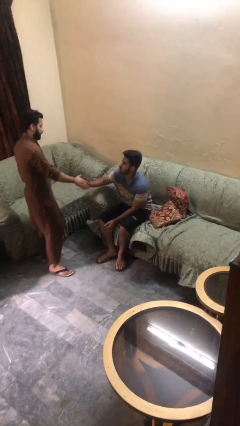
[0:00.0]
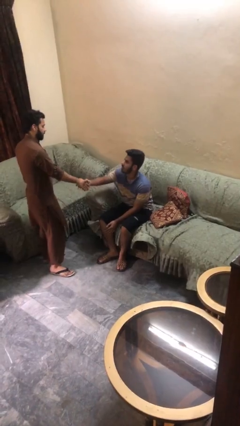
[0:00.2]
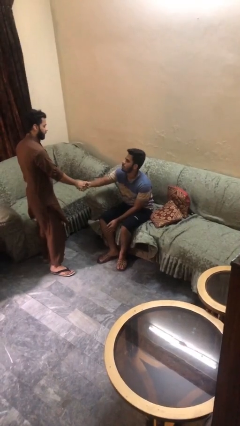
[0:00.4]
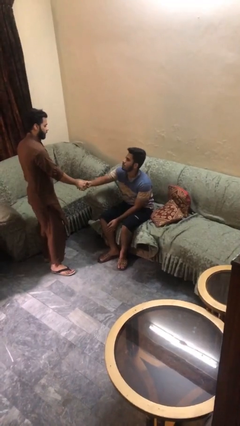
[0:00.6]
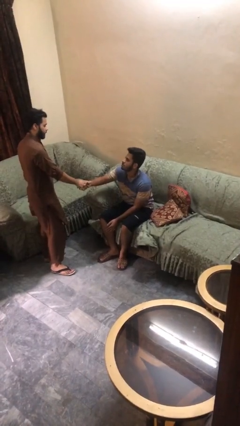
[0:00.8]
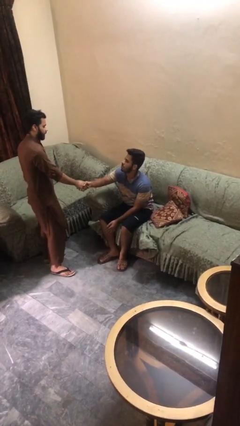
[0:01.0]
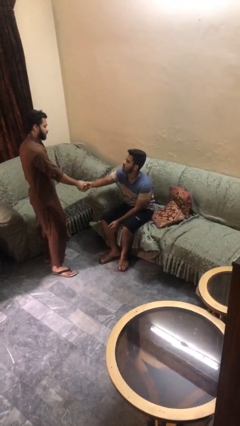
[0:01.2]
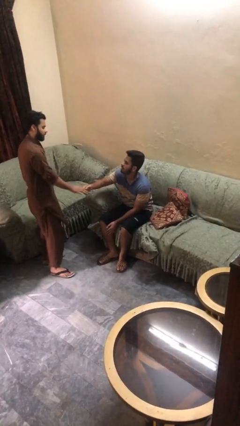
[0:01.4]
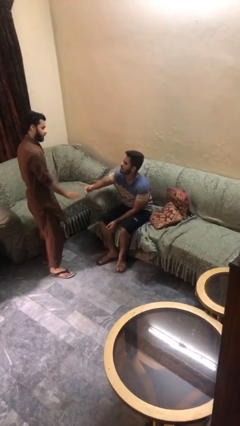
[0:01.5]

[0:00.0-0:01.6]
person shakes hand

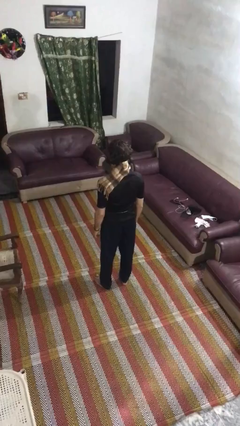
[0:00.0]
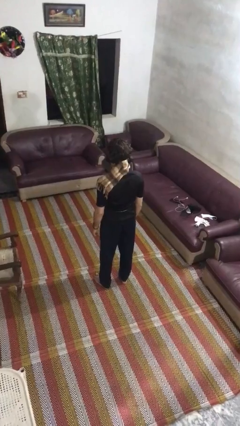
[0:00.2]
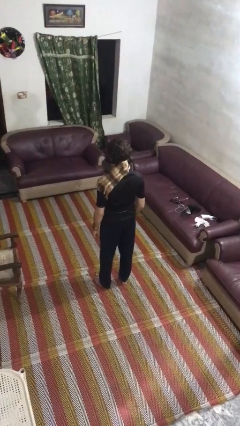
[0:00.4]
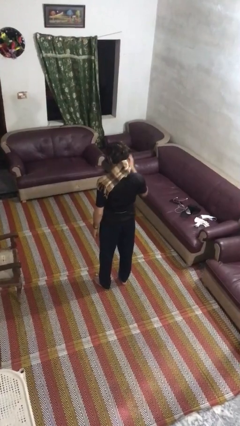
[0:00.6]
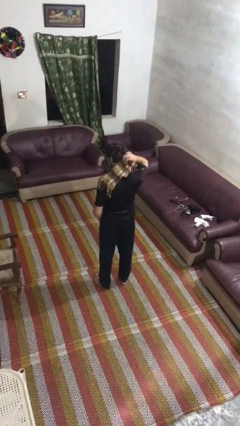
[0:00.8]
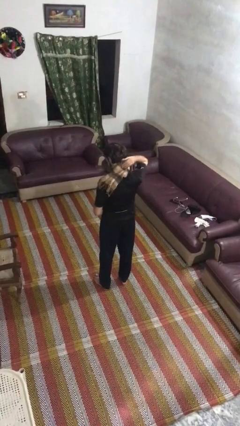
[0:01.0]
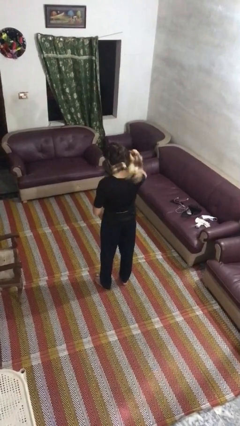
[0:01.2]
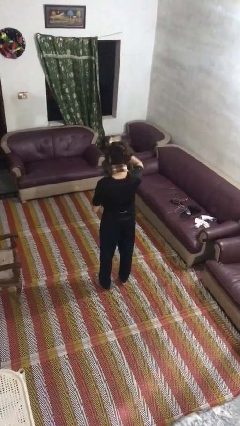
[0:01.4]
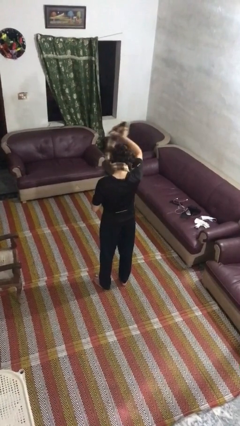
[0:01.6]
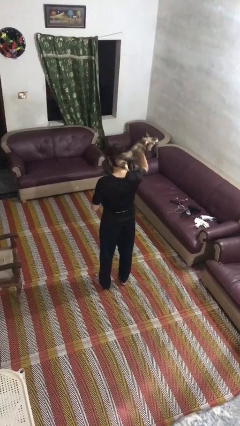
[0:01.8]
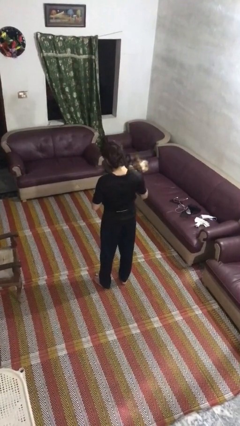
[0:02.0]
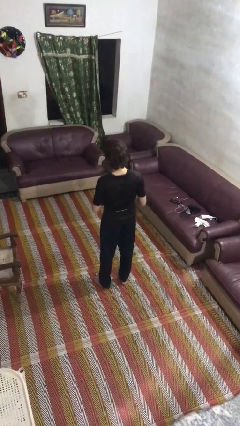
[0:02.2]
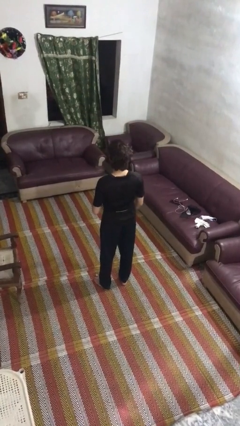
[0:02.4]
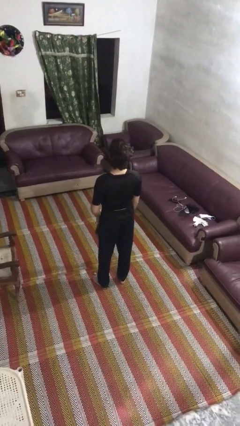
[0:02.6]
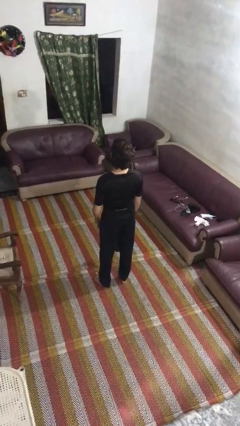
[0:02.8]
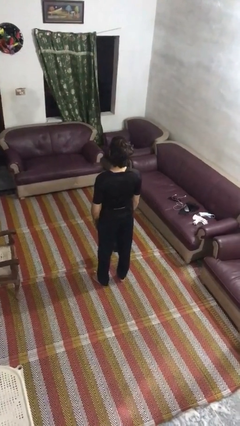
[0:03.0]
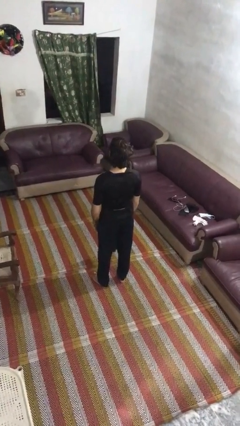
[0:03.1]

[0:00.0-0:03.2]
person takes off scarf

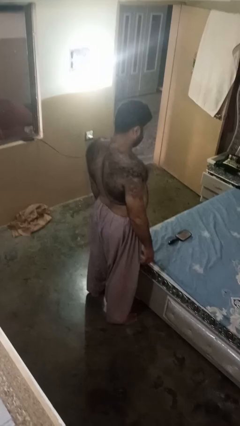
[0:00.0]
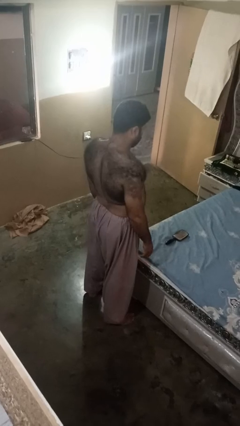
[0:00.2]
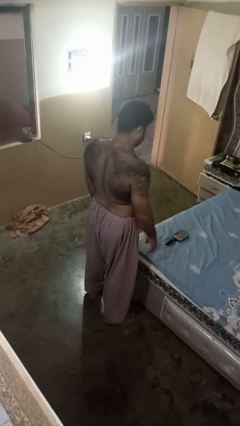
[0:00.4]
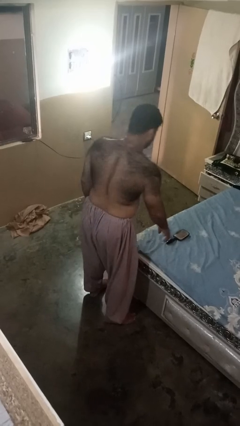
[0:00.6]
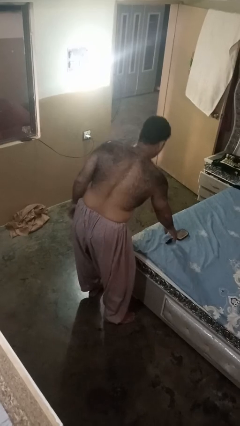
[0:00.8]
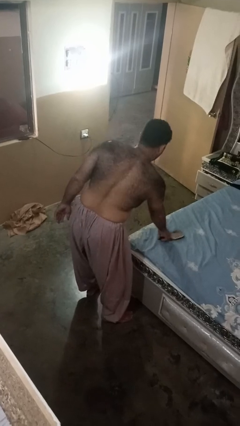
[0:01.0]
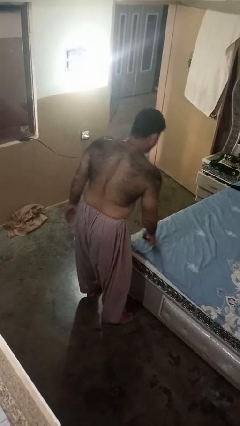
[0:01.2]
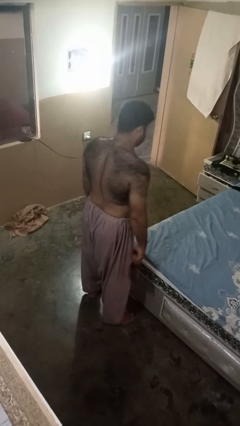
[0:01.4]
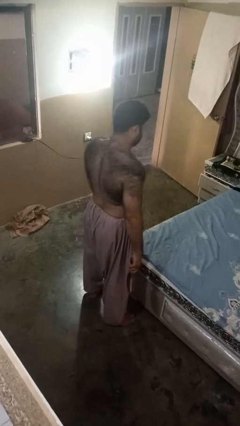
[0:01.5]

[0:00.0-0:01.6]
person picks up object from bed

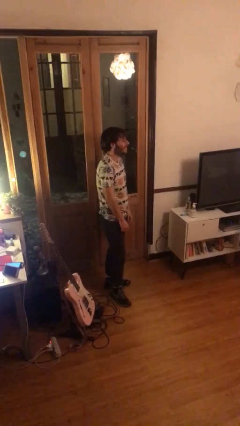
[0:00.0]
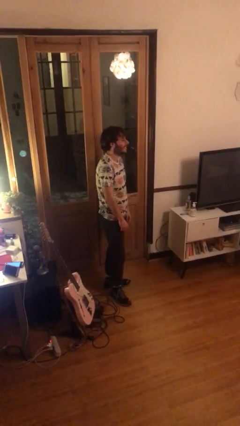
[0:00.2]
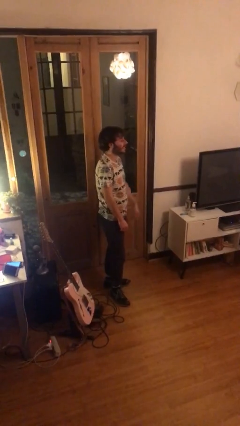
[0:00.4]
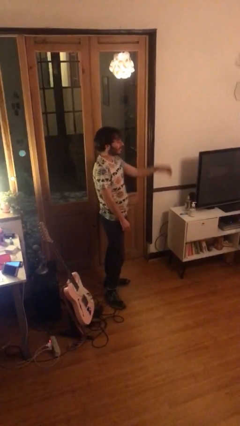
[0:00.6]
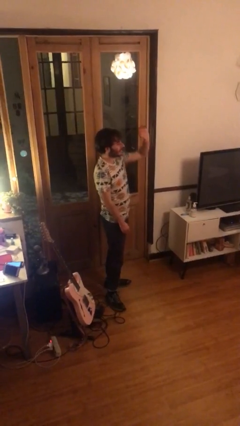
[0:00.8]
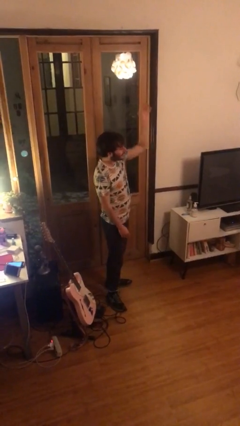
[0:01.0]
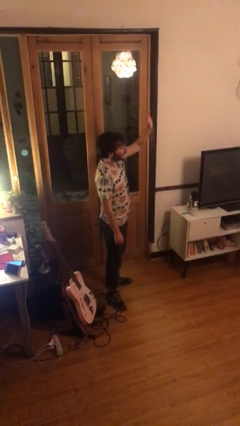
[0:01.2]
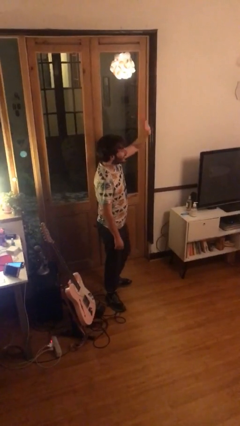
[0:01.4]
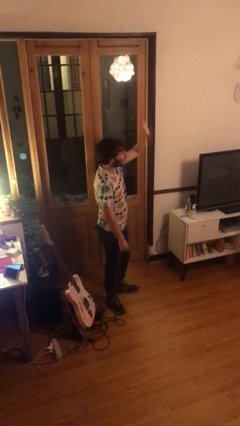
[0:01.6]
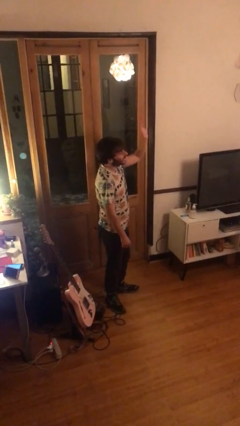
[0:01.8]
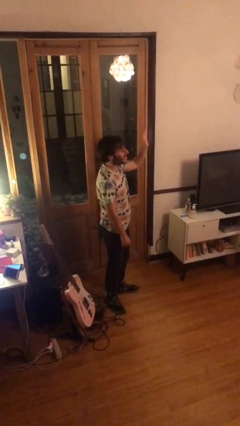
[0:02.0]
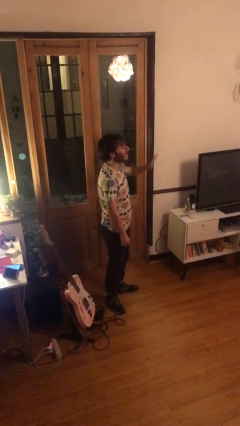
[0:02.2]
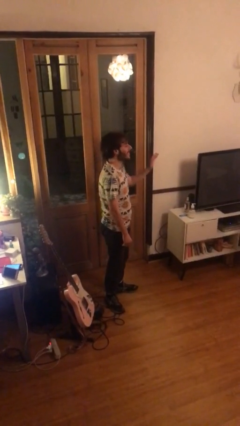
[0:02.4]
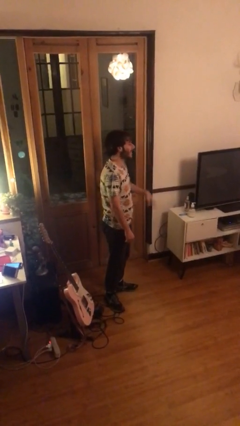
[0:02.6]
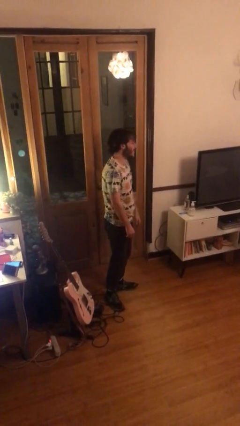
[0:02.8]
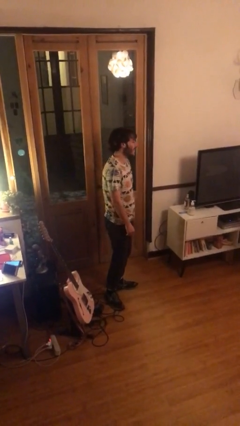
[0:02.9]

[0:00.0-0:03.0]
person waves at person

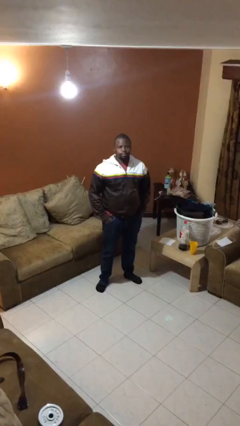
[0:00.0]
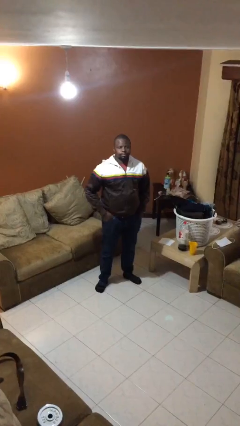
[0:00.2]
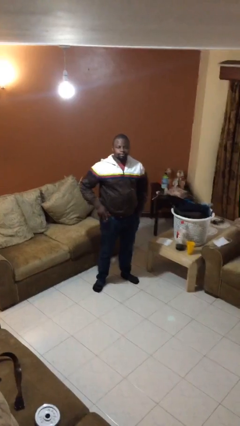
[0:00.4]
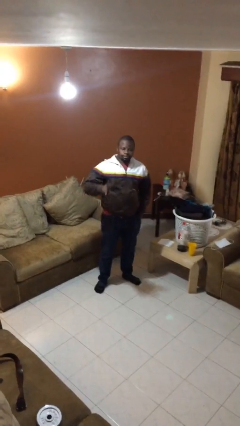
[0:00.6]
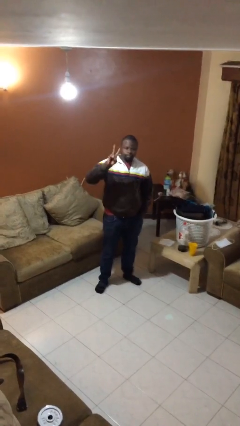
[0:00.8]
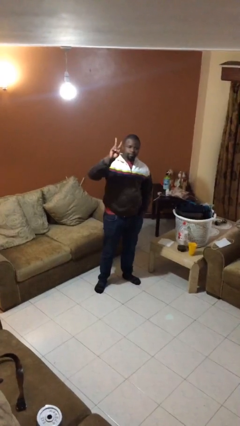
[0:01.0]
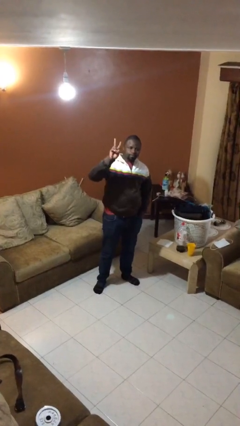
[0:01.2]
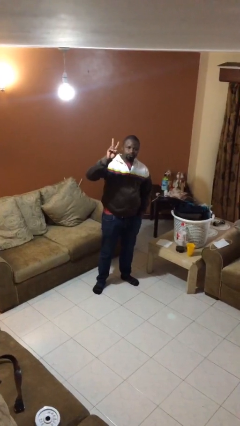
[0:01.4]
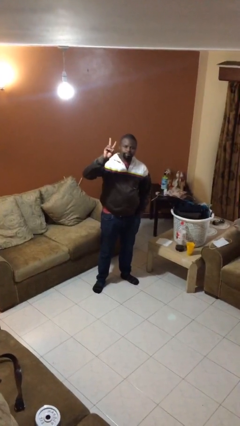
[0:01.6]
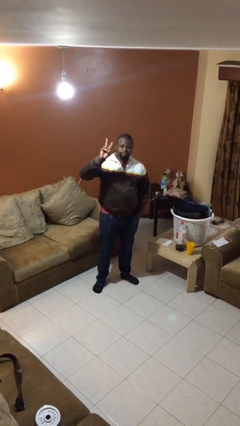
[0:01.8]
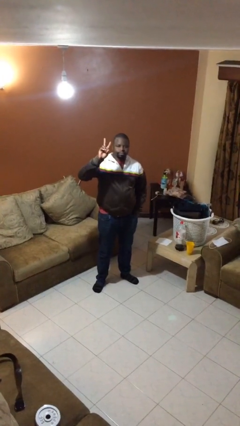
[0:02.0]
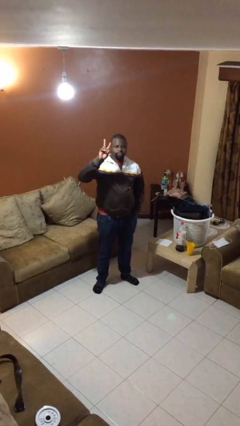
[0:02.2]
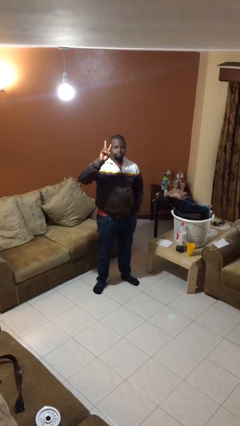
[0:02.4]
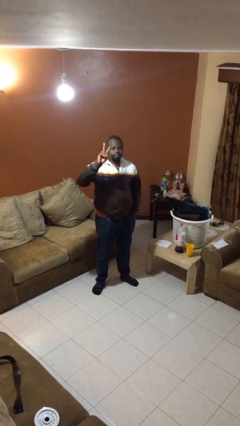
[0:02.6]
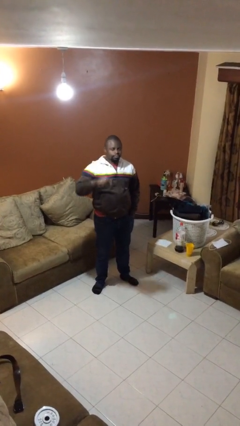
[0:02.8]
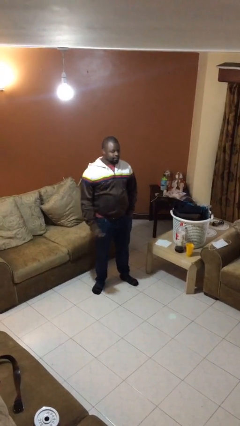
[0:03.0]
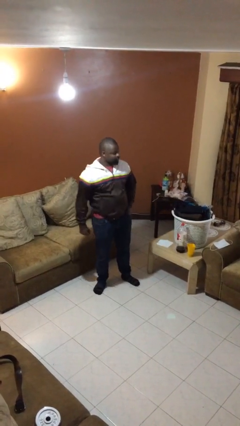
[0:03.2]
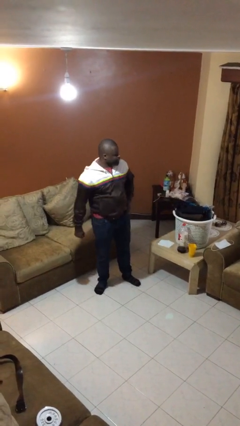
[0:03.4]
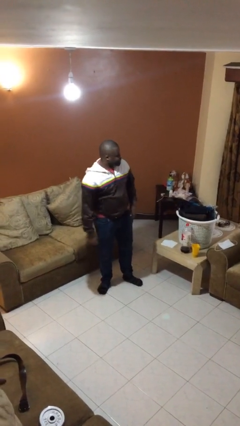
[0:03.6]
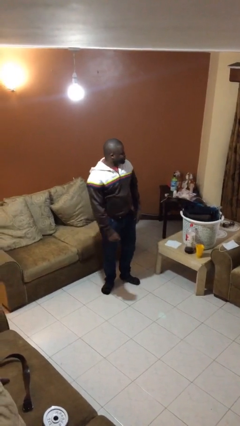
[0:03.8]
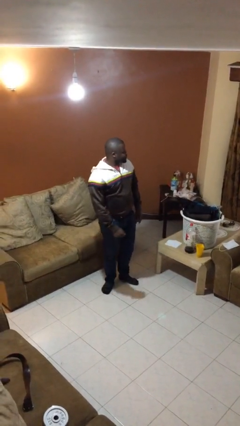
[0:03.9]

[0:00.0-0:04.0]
person gestures peace

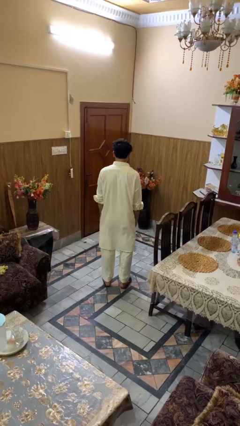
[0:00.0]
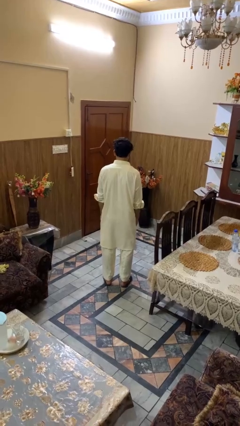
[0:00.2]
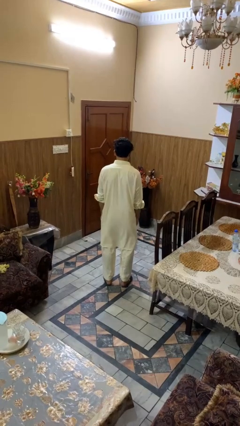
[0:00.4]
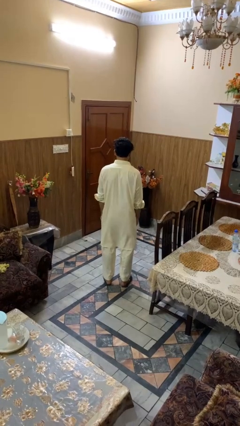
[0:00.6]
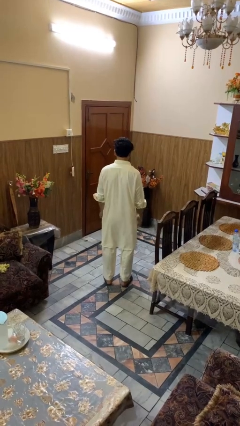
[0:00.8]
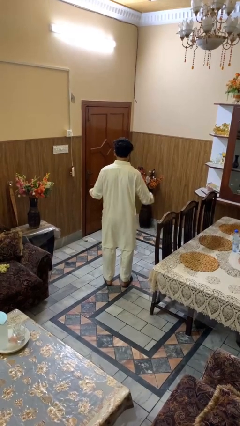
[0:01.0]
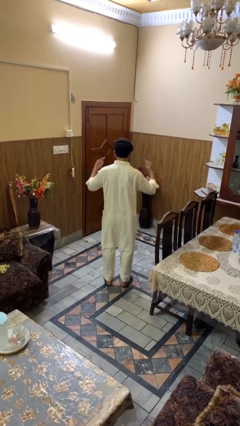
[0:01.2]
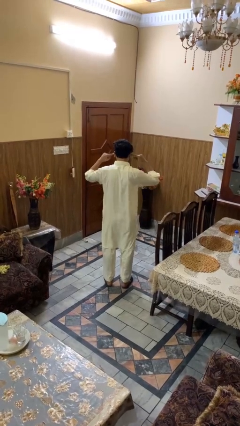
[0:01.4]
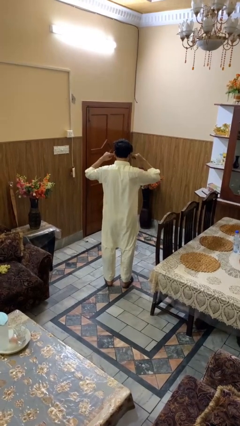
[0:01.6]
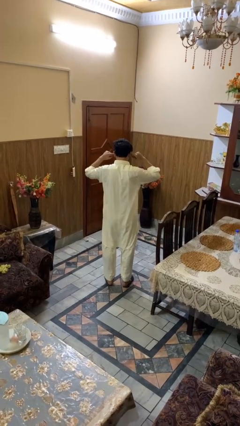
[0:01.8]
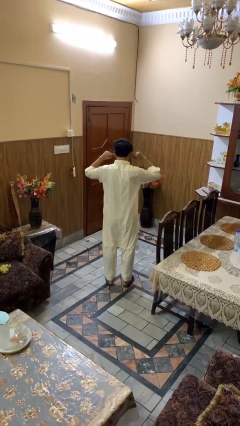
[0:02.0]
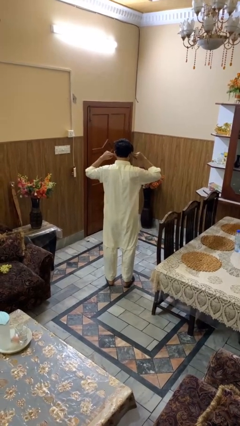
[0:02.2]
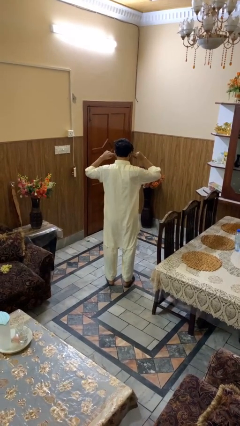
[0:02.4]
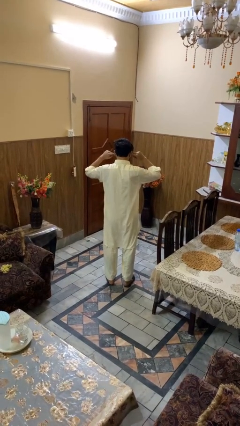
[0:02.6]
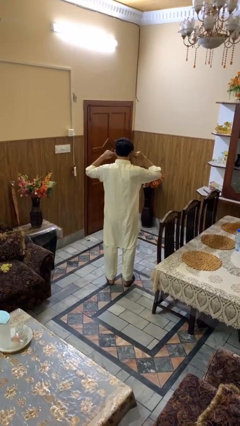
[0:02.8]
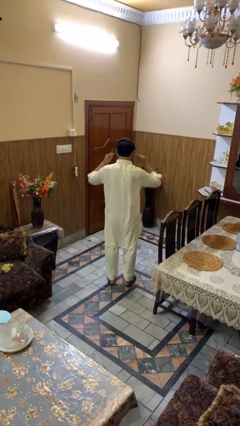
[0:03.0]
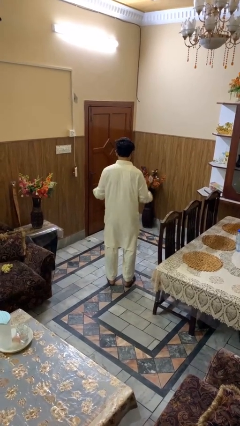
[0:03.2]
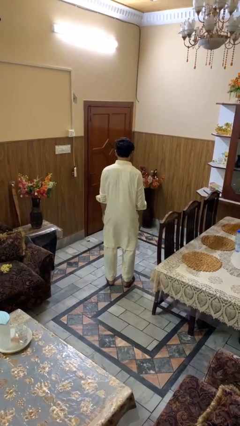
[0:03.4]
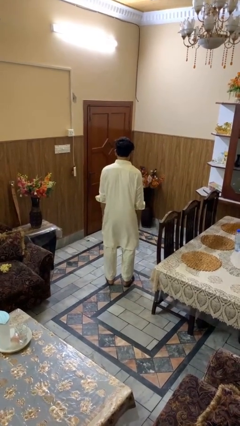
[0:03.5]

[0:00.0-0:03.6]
person puts fingers in ear
